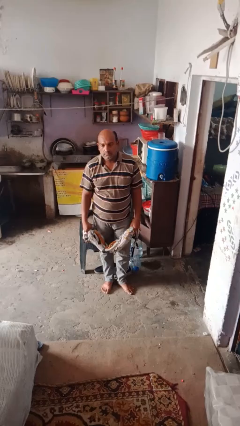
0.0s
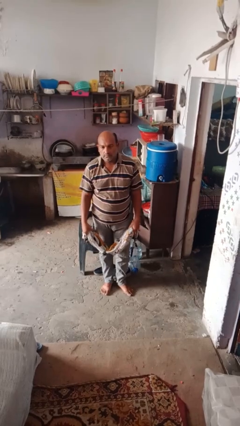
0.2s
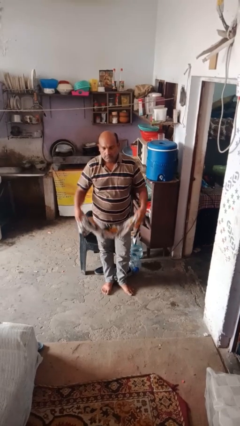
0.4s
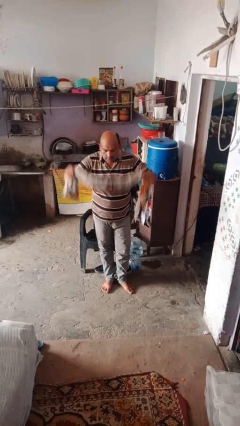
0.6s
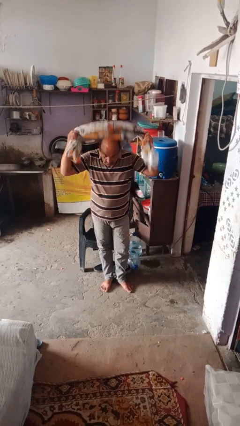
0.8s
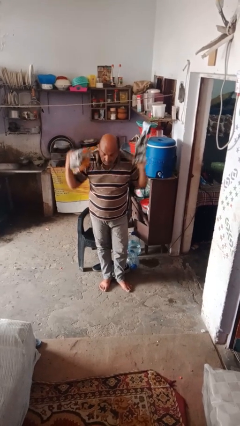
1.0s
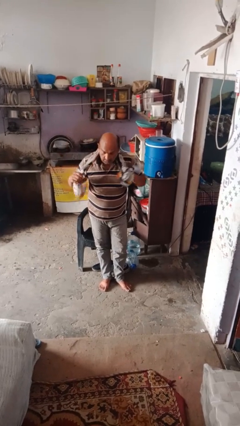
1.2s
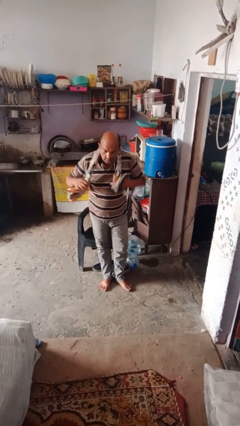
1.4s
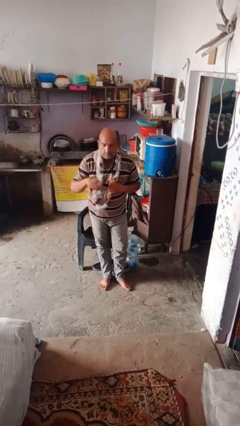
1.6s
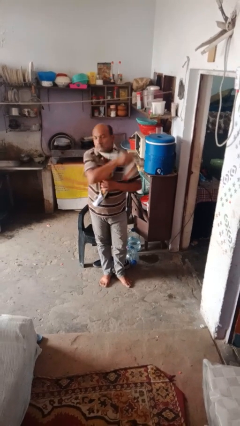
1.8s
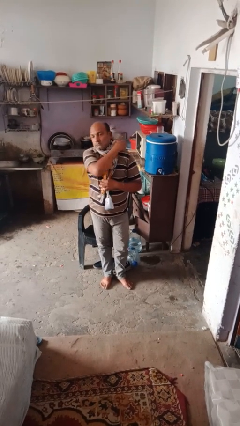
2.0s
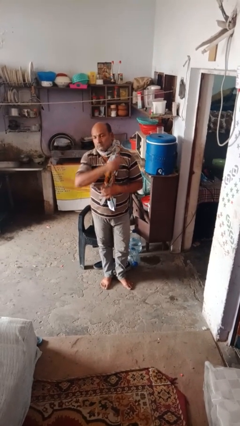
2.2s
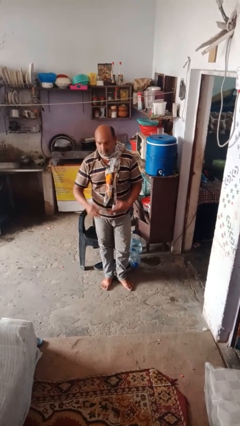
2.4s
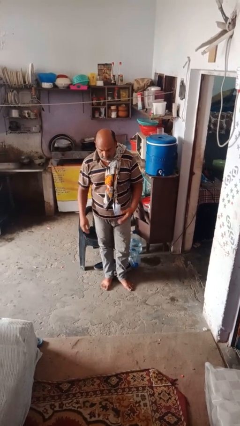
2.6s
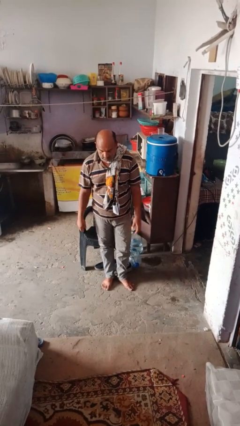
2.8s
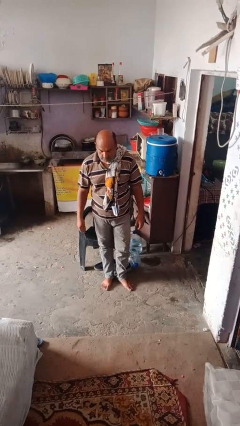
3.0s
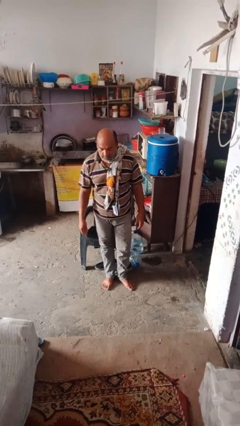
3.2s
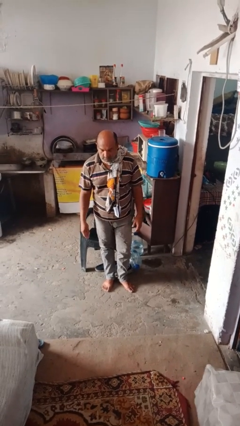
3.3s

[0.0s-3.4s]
person puts on scarf

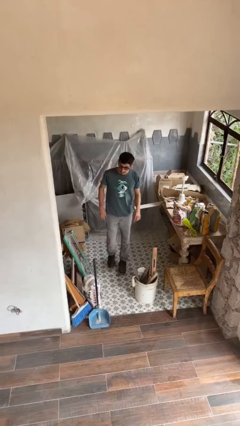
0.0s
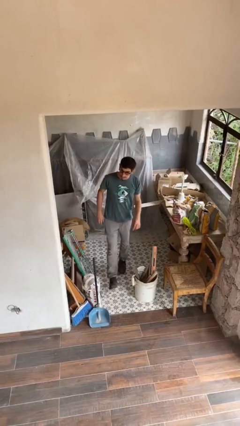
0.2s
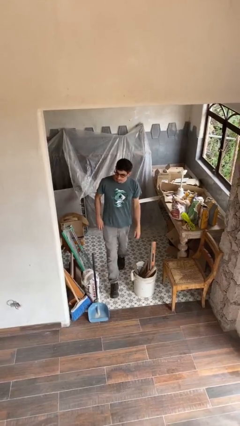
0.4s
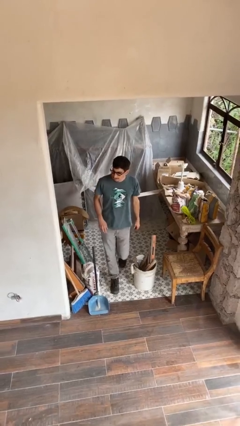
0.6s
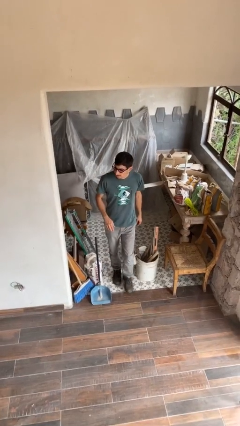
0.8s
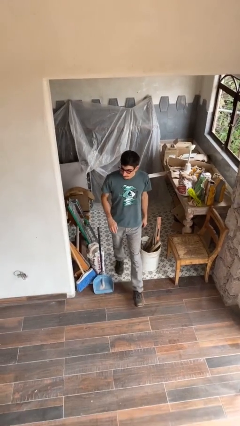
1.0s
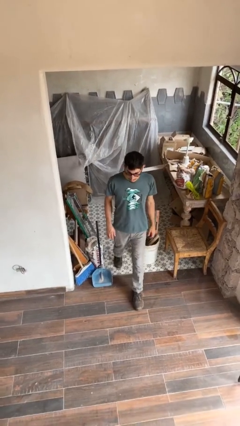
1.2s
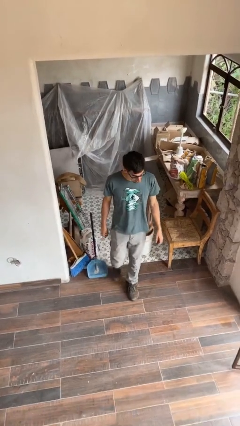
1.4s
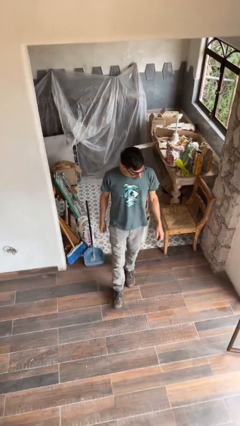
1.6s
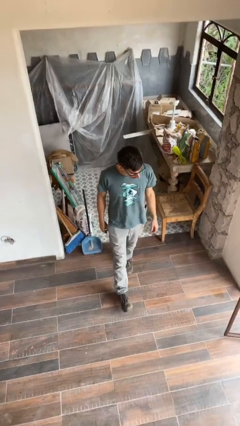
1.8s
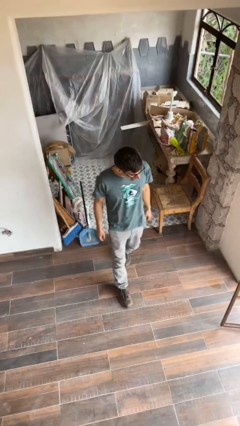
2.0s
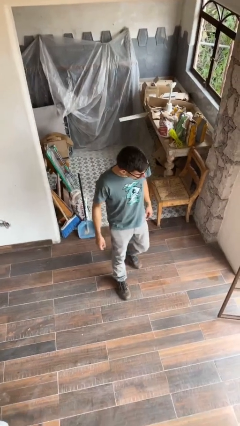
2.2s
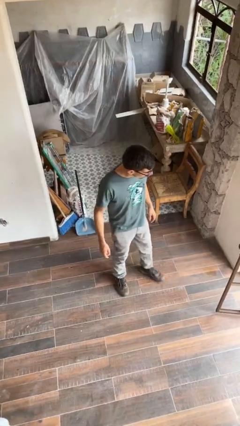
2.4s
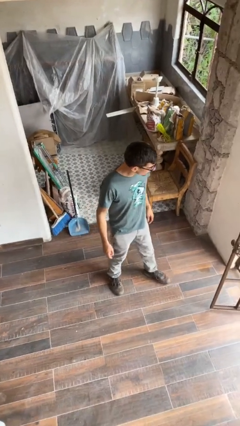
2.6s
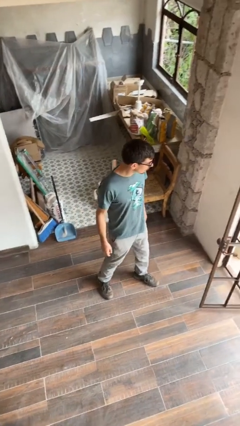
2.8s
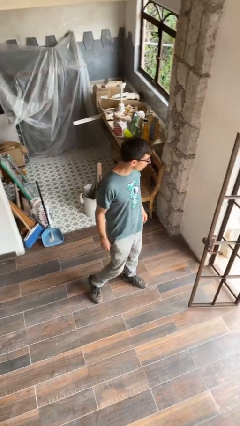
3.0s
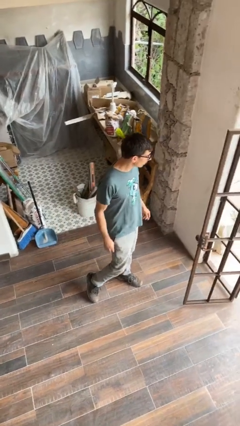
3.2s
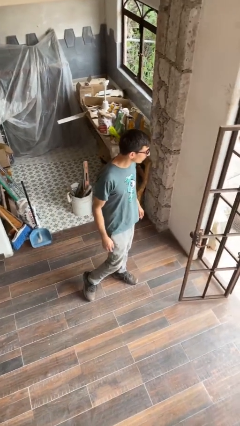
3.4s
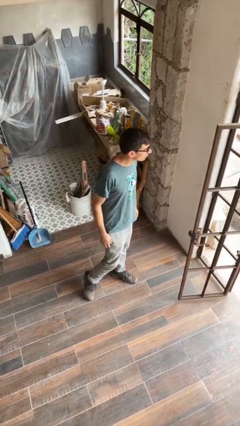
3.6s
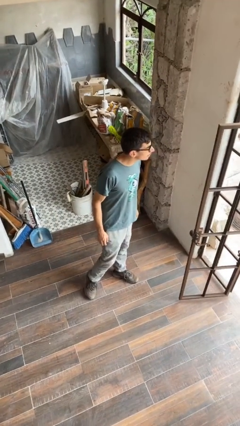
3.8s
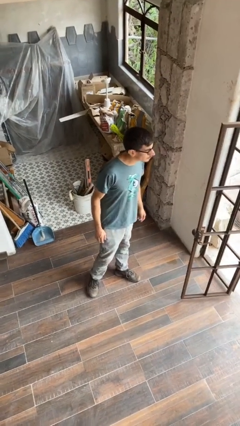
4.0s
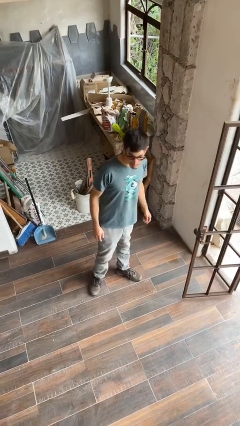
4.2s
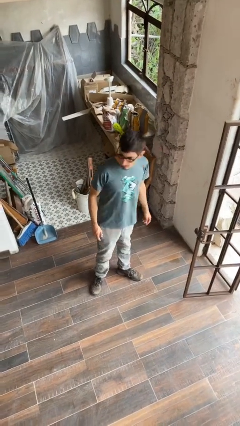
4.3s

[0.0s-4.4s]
person enters scene through structure

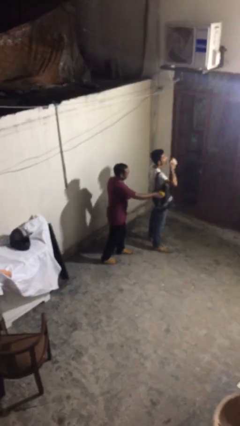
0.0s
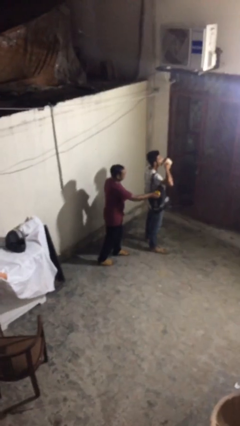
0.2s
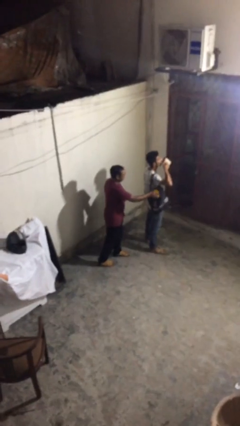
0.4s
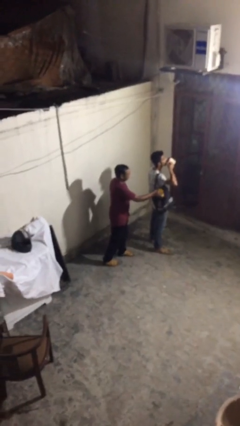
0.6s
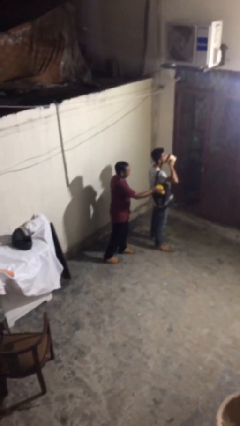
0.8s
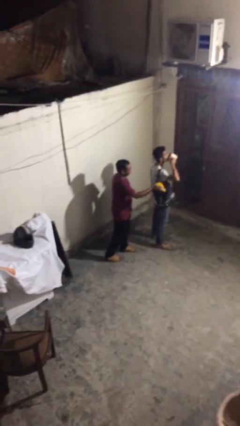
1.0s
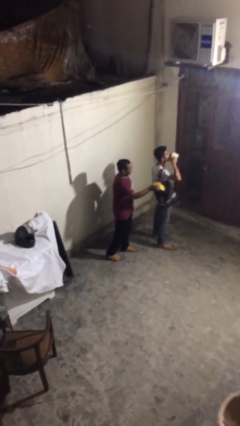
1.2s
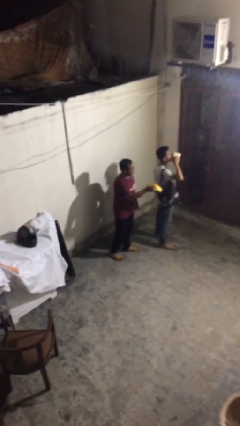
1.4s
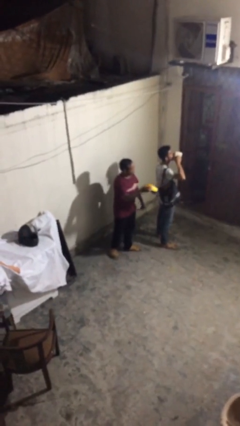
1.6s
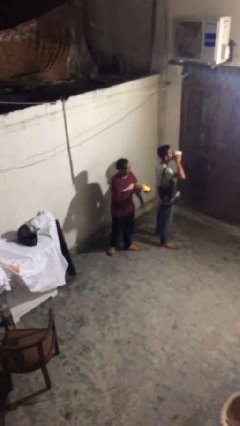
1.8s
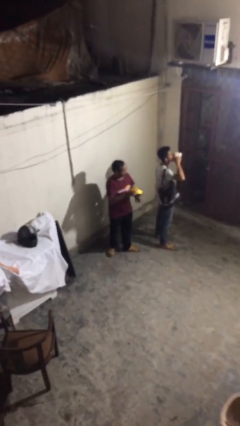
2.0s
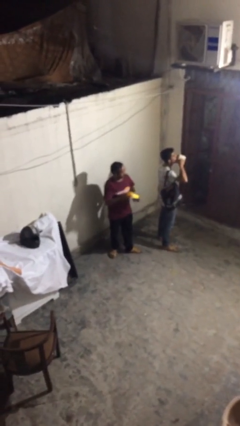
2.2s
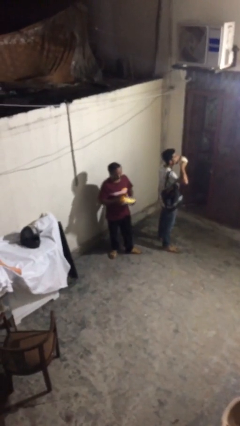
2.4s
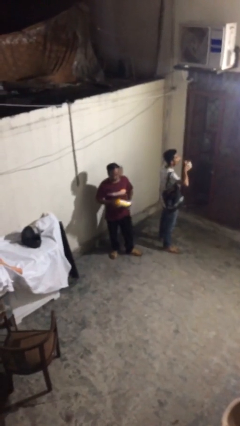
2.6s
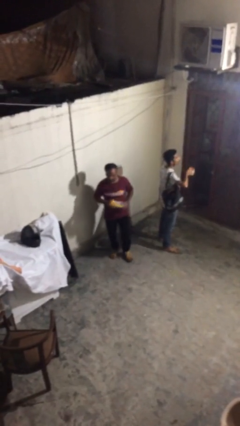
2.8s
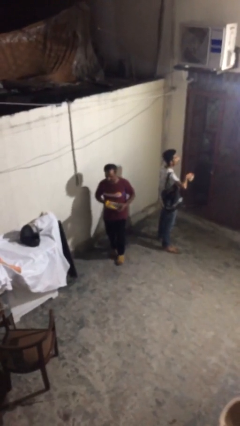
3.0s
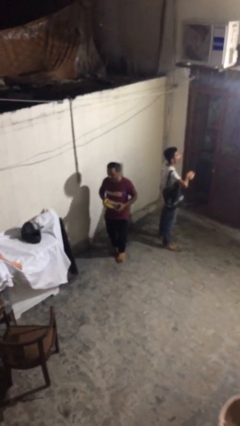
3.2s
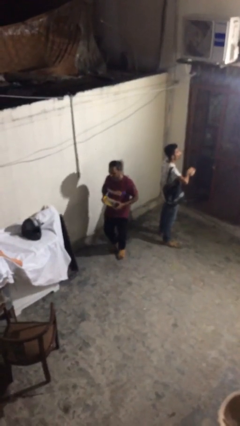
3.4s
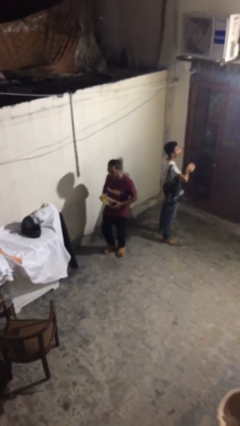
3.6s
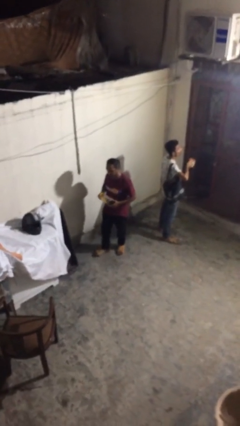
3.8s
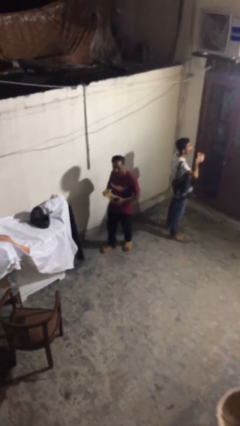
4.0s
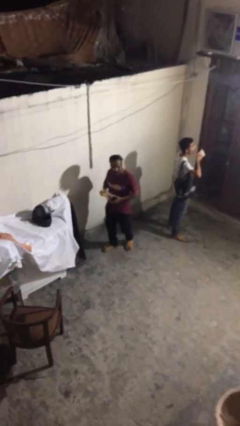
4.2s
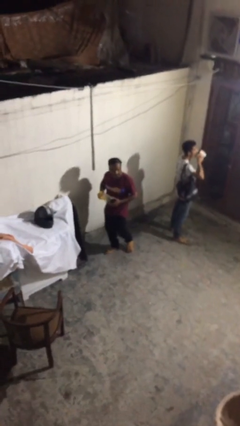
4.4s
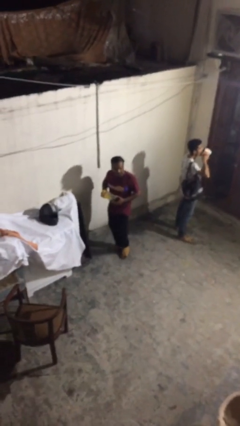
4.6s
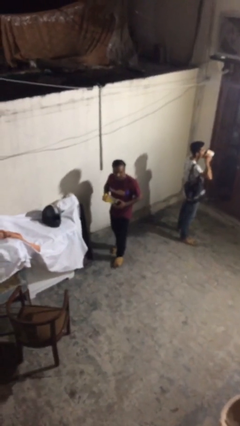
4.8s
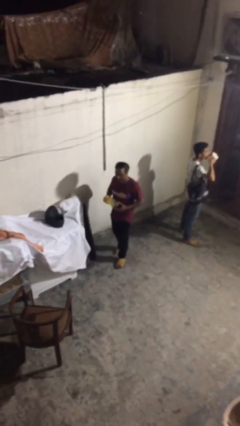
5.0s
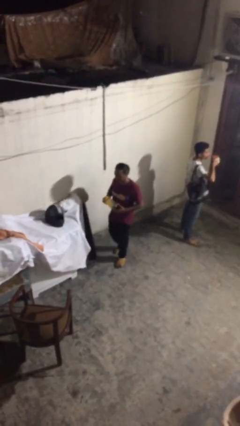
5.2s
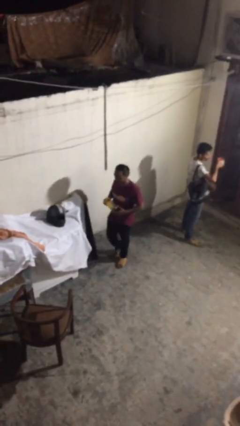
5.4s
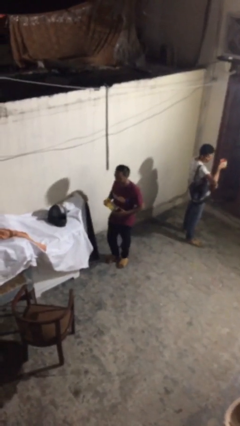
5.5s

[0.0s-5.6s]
person steals object from person

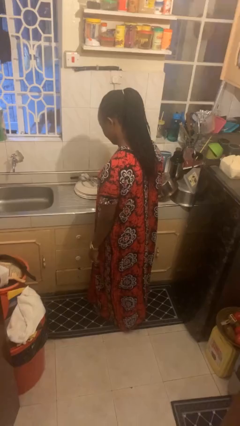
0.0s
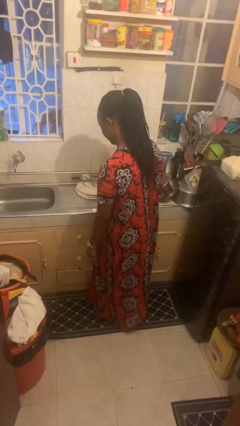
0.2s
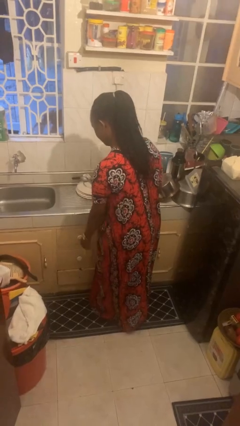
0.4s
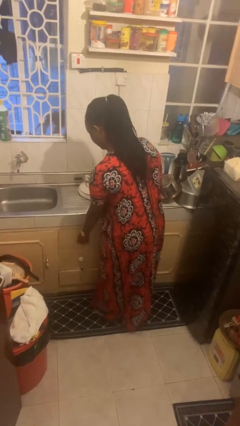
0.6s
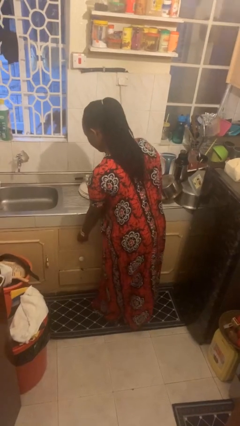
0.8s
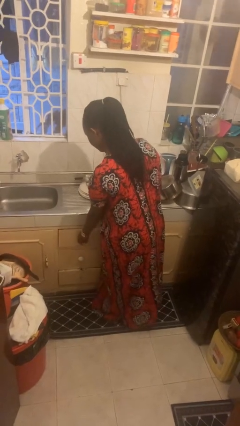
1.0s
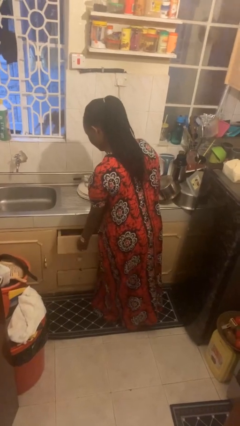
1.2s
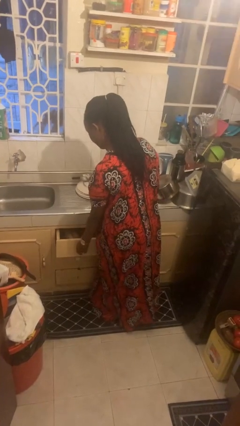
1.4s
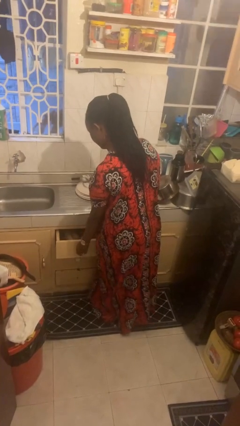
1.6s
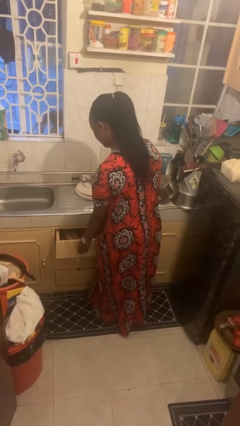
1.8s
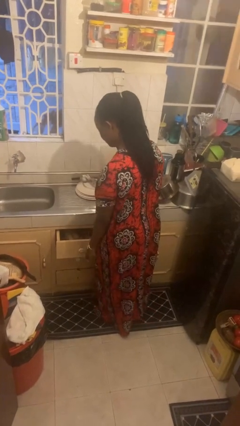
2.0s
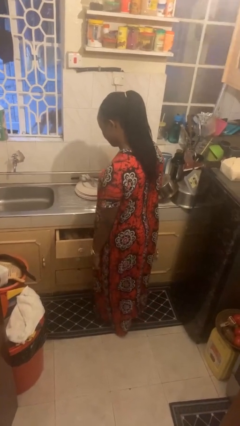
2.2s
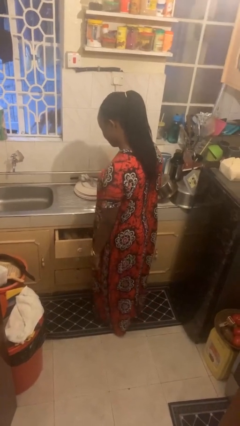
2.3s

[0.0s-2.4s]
person opens kitchen drawer

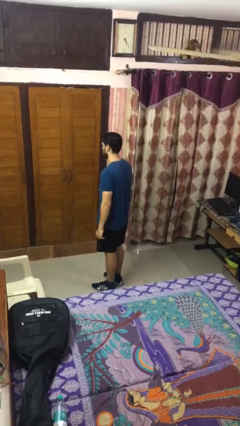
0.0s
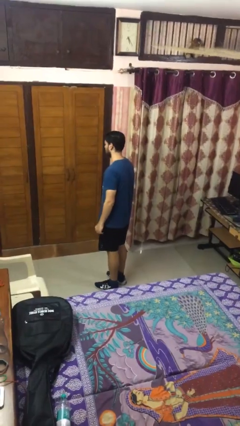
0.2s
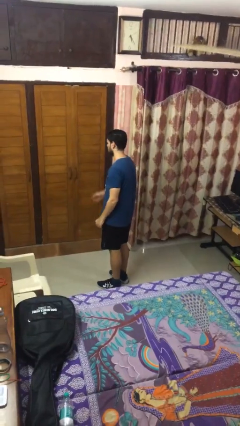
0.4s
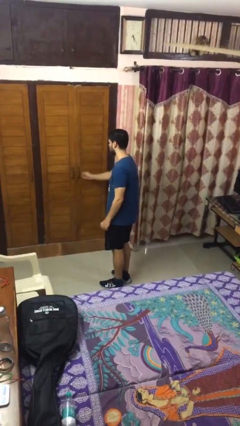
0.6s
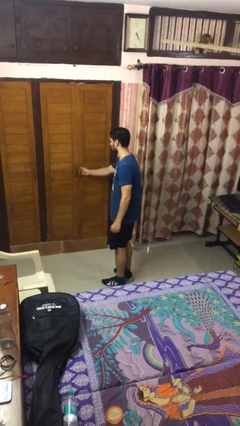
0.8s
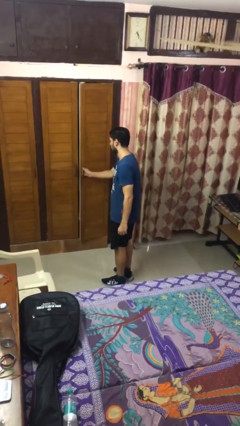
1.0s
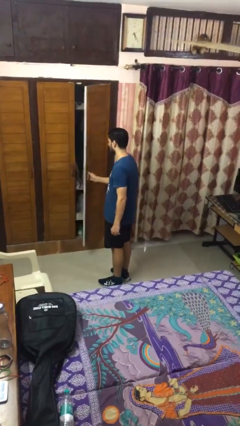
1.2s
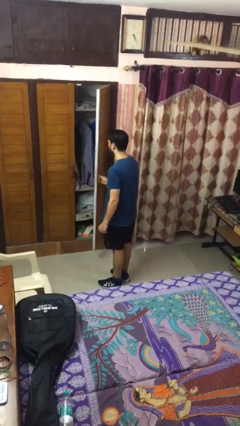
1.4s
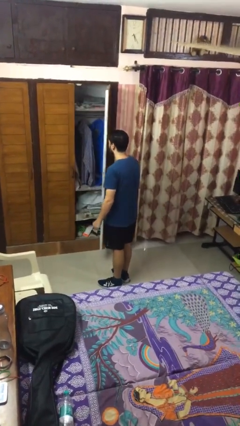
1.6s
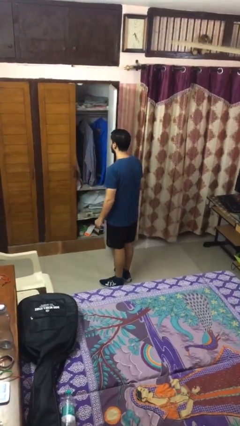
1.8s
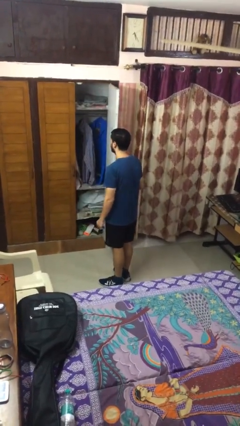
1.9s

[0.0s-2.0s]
person opens closet door
